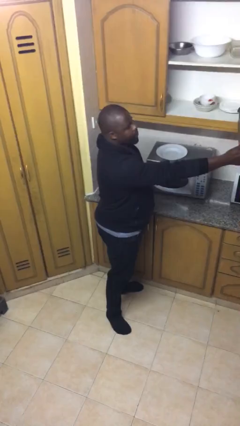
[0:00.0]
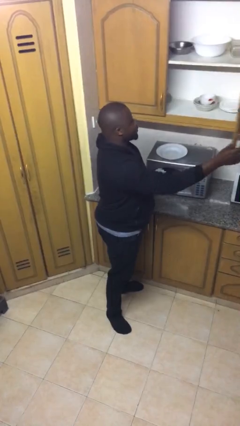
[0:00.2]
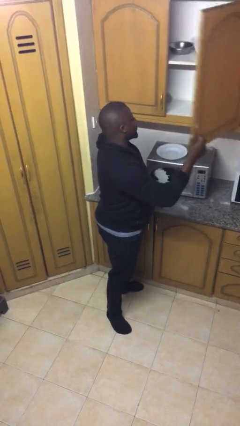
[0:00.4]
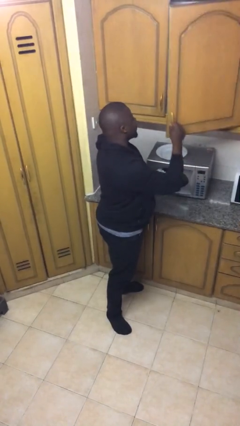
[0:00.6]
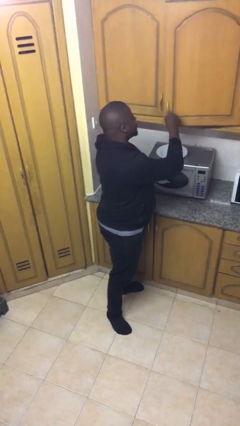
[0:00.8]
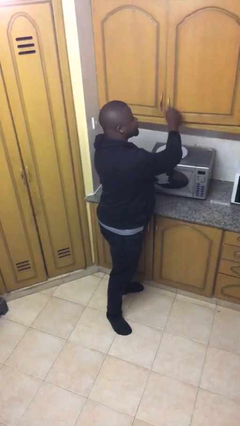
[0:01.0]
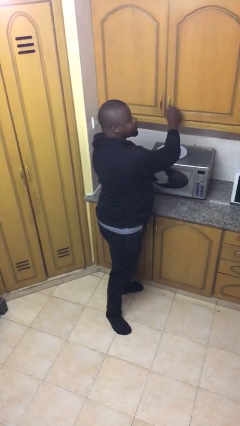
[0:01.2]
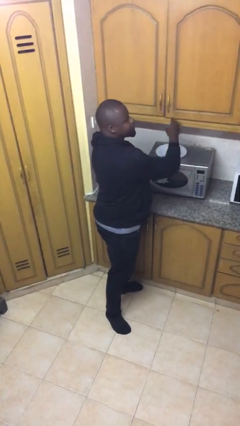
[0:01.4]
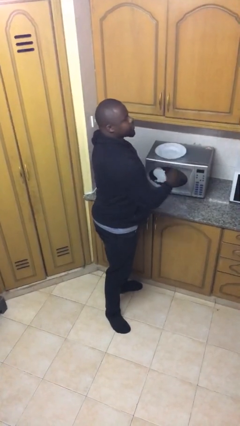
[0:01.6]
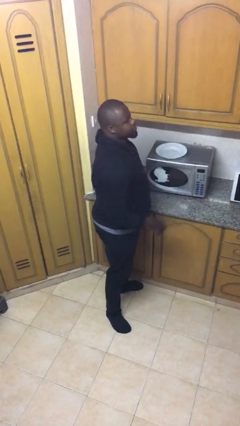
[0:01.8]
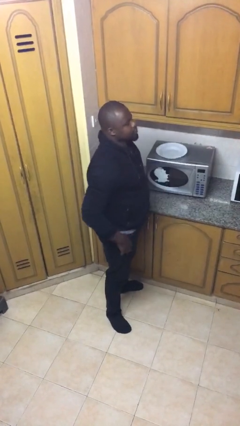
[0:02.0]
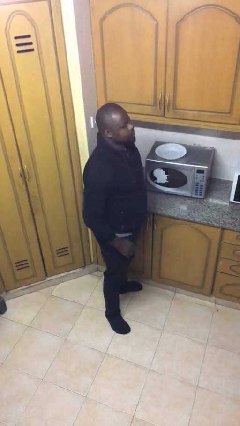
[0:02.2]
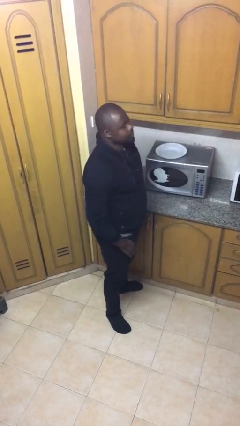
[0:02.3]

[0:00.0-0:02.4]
person closes cabinet

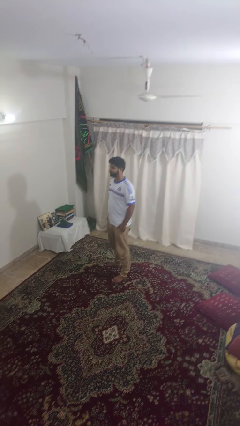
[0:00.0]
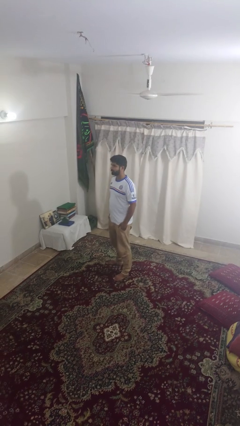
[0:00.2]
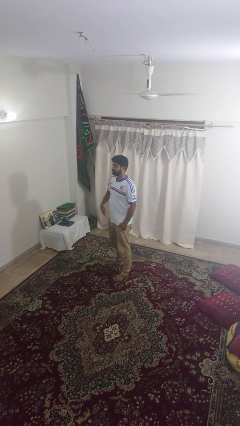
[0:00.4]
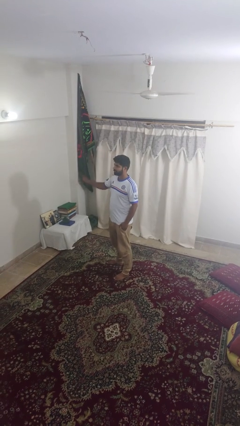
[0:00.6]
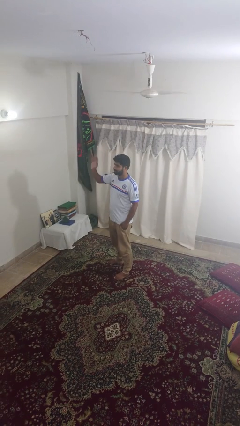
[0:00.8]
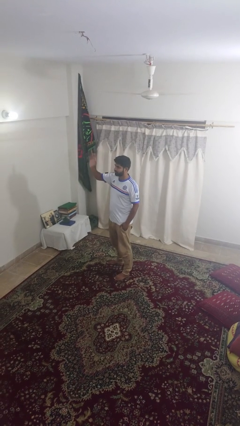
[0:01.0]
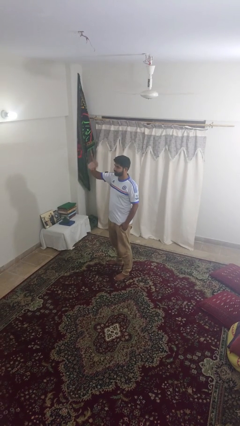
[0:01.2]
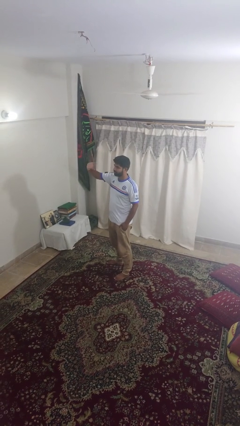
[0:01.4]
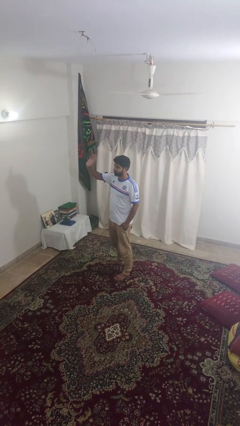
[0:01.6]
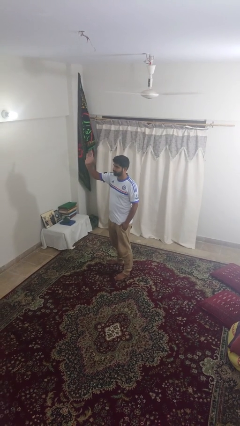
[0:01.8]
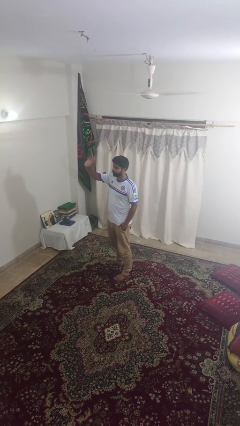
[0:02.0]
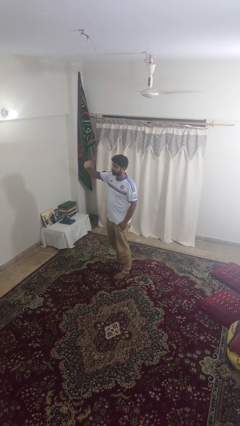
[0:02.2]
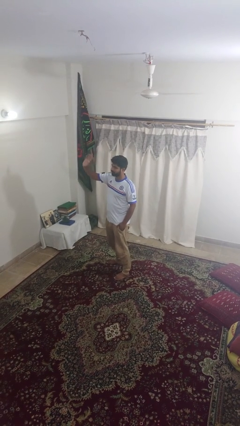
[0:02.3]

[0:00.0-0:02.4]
person waves at person

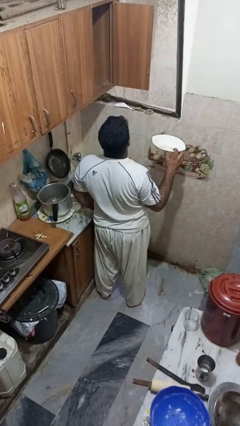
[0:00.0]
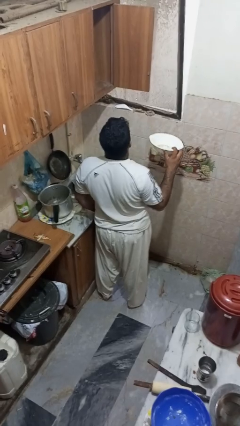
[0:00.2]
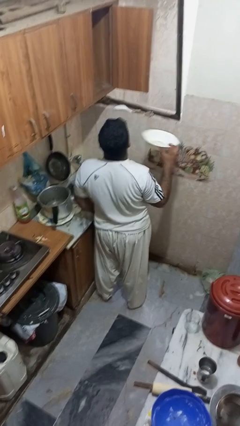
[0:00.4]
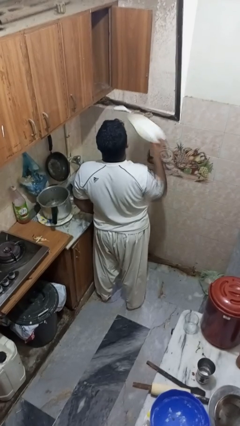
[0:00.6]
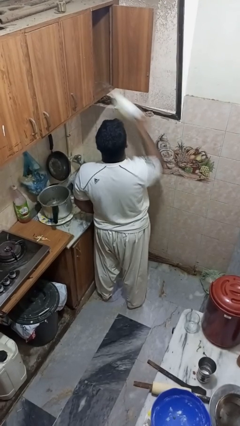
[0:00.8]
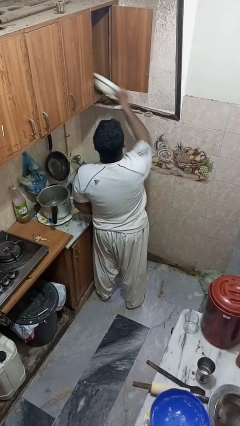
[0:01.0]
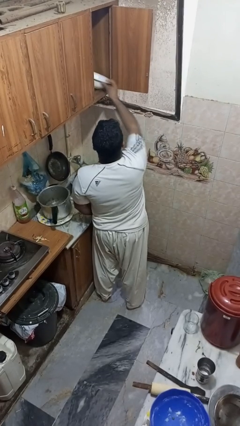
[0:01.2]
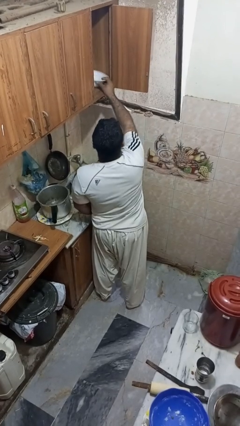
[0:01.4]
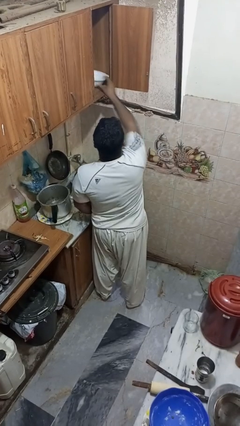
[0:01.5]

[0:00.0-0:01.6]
person puts object in cabinet

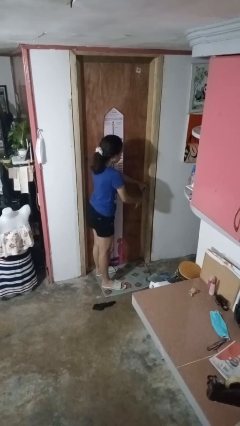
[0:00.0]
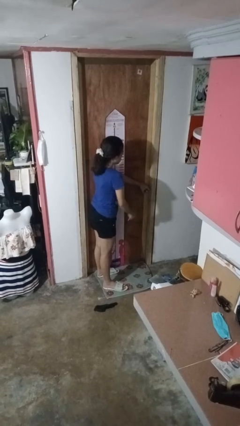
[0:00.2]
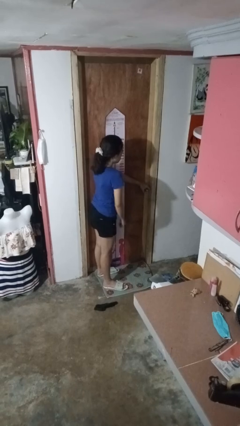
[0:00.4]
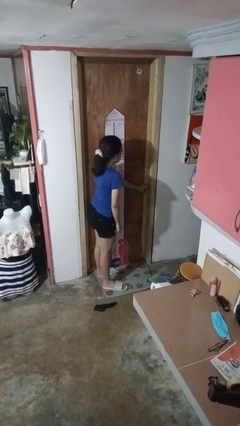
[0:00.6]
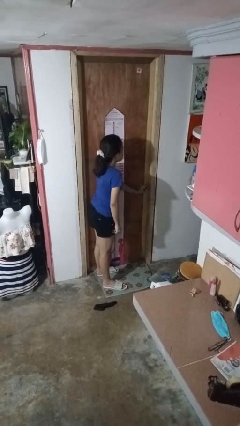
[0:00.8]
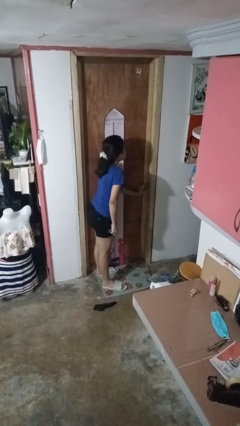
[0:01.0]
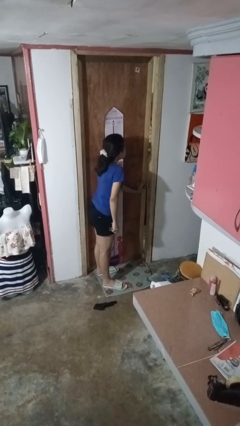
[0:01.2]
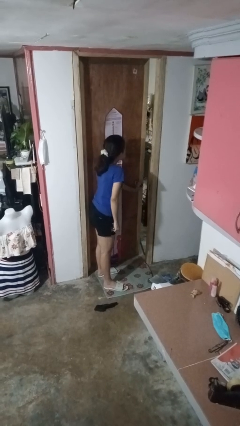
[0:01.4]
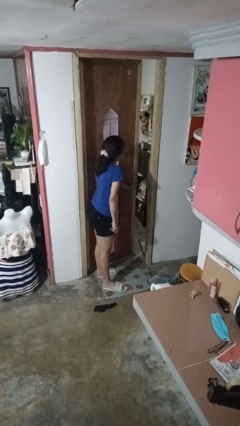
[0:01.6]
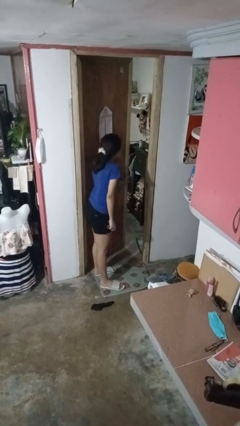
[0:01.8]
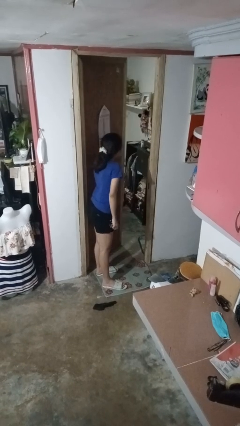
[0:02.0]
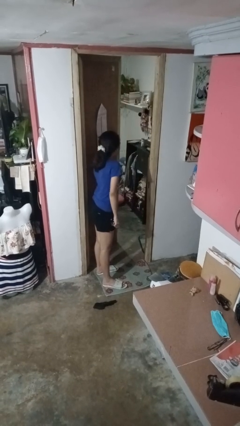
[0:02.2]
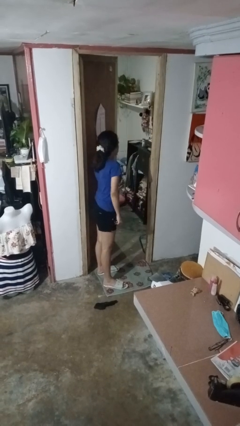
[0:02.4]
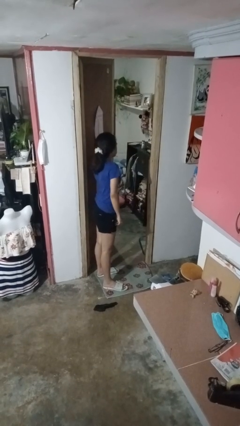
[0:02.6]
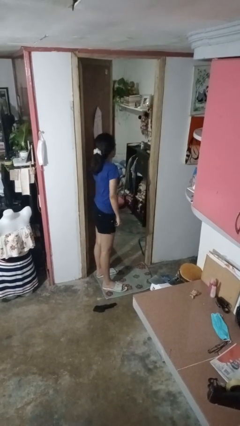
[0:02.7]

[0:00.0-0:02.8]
person opens facility door

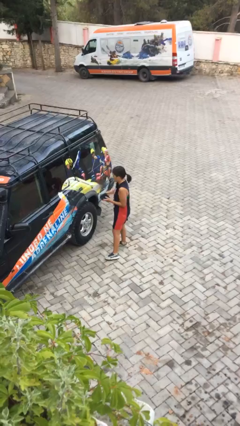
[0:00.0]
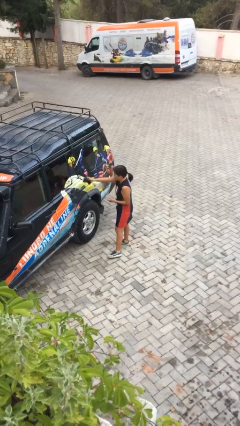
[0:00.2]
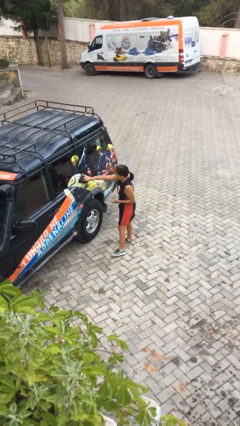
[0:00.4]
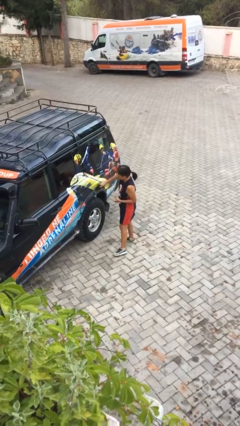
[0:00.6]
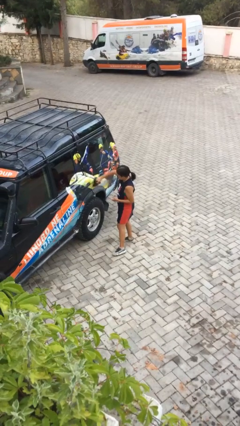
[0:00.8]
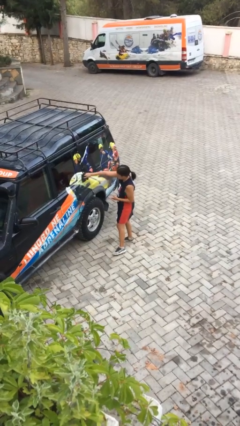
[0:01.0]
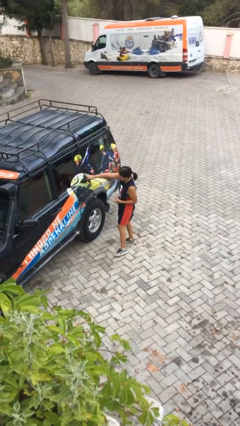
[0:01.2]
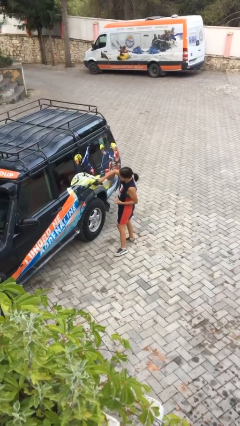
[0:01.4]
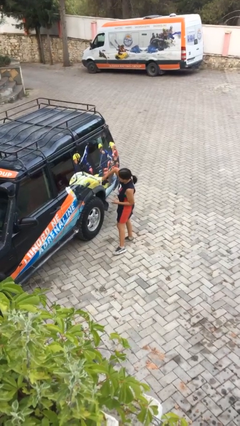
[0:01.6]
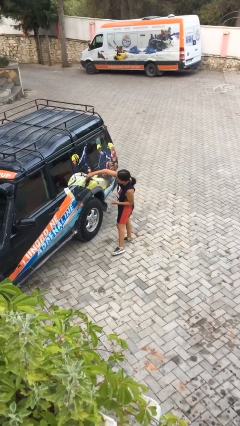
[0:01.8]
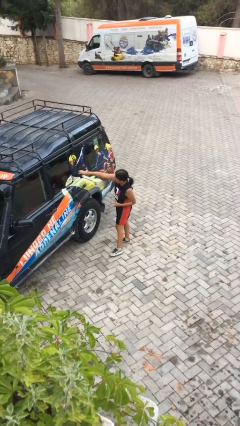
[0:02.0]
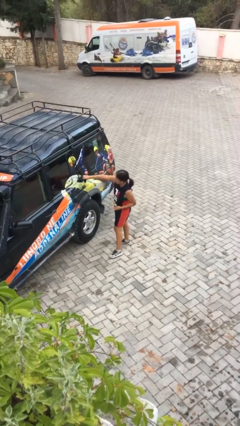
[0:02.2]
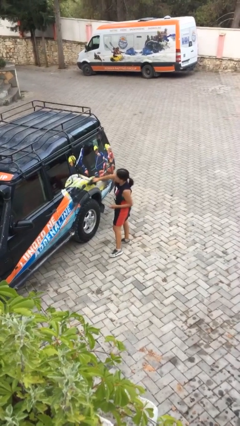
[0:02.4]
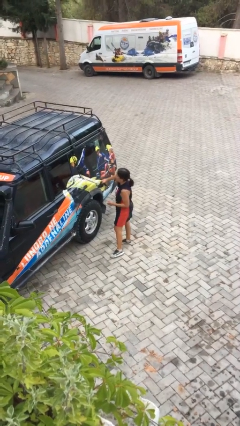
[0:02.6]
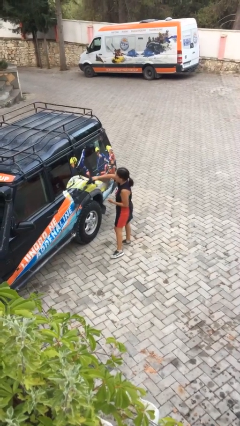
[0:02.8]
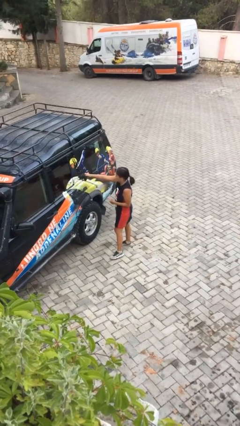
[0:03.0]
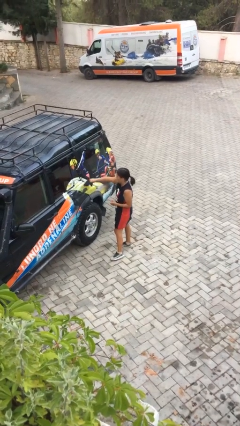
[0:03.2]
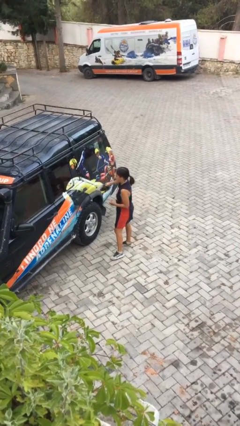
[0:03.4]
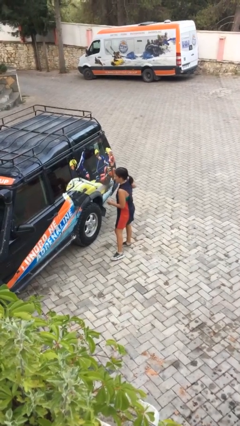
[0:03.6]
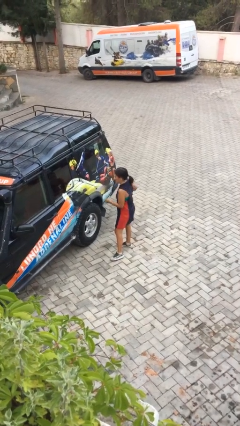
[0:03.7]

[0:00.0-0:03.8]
person polishes car with rag

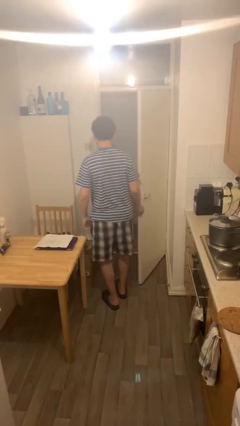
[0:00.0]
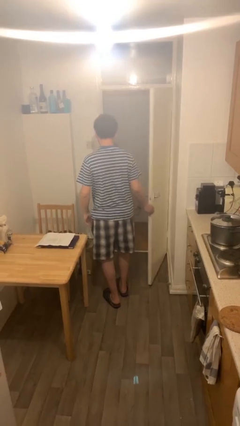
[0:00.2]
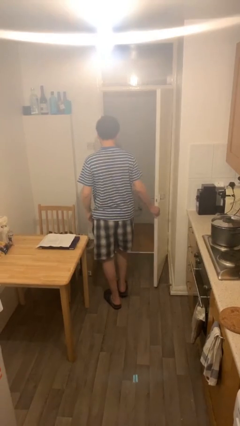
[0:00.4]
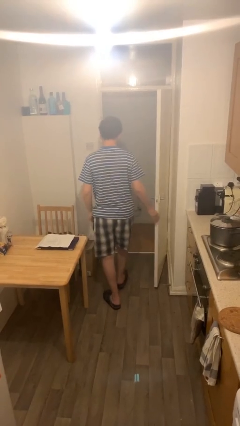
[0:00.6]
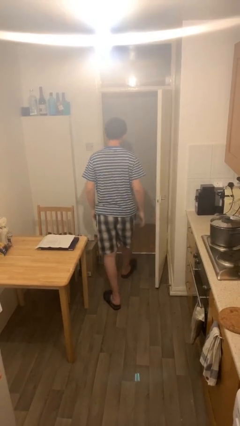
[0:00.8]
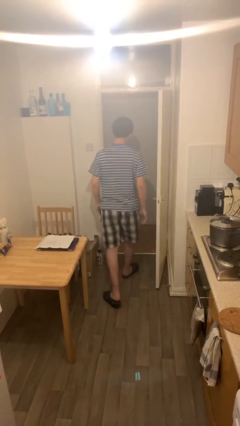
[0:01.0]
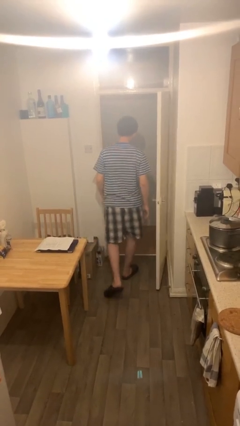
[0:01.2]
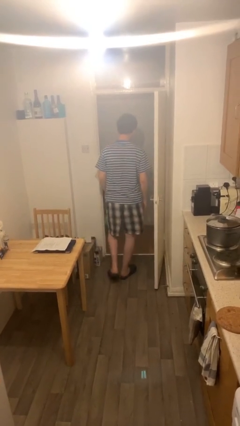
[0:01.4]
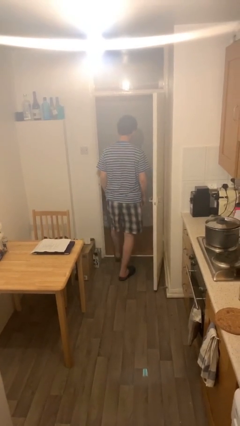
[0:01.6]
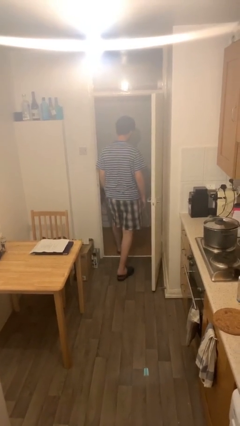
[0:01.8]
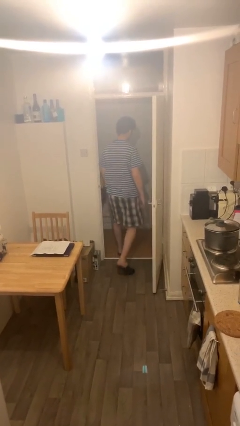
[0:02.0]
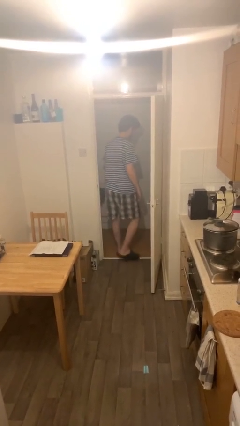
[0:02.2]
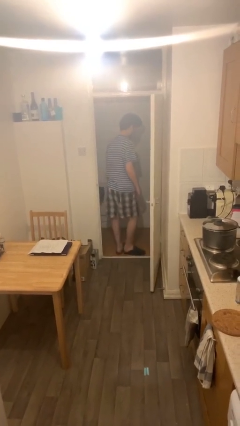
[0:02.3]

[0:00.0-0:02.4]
person exits scene through structure

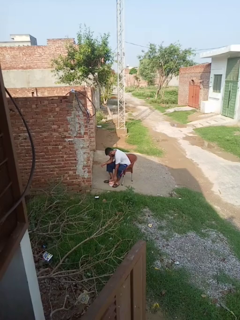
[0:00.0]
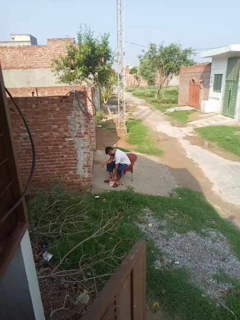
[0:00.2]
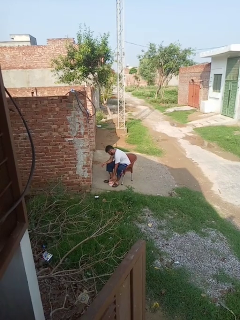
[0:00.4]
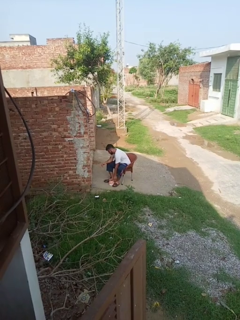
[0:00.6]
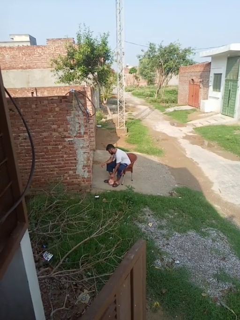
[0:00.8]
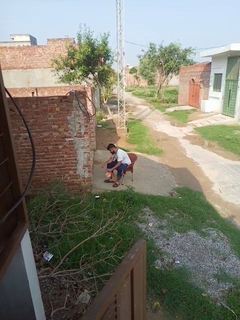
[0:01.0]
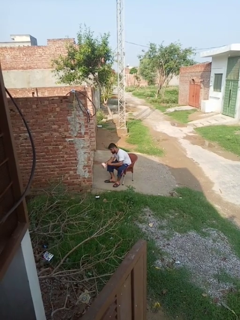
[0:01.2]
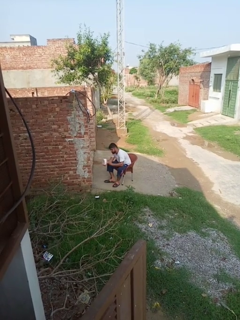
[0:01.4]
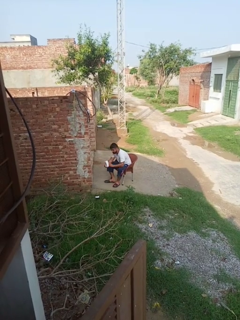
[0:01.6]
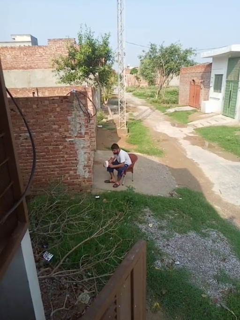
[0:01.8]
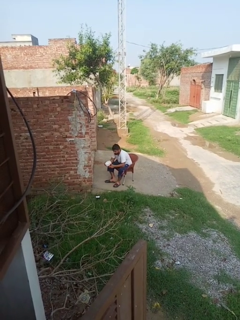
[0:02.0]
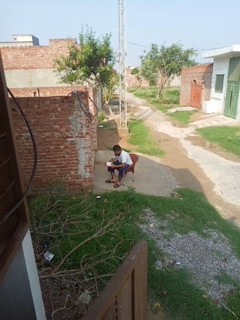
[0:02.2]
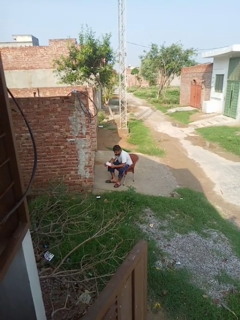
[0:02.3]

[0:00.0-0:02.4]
person picks up object from floor
